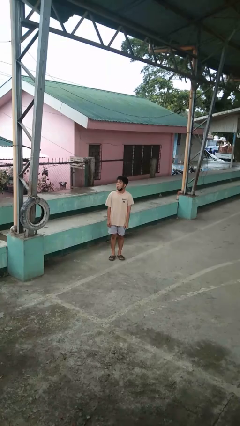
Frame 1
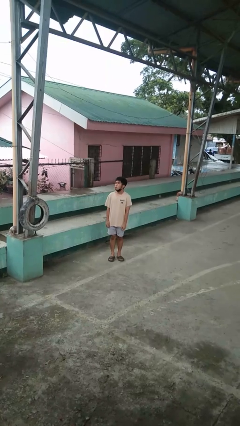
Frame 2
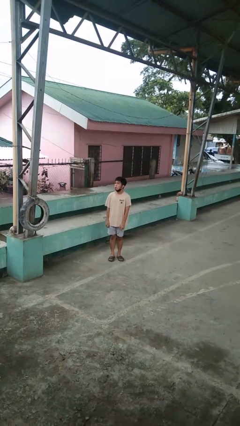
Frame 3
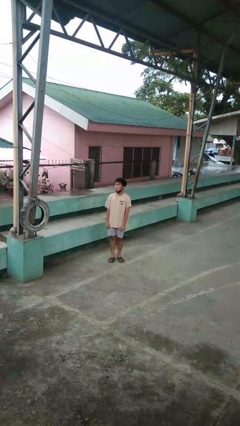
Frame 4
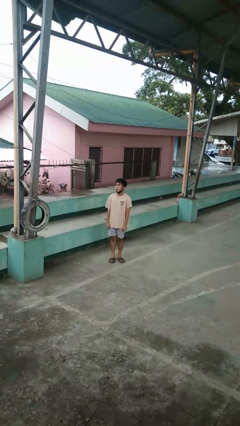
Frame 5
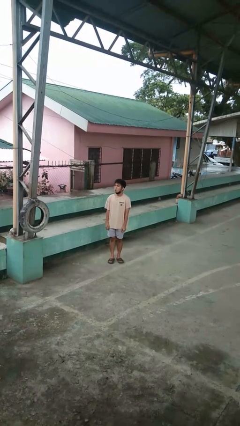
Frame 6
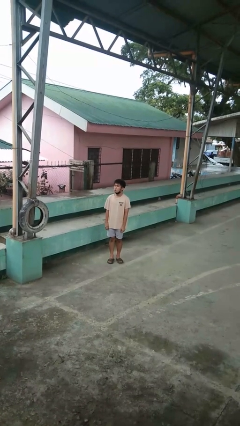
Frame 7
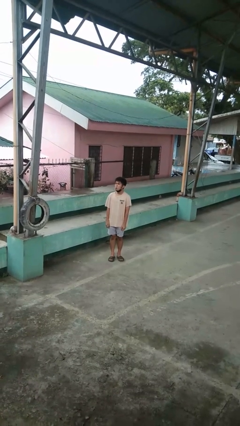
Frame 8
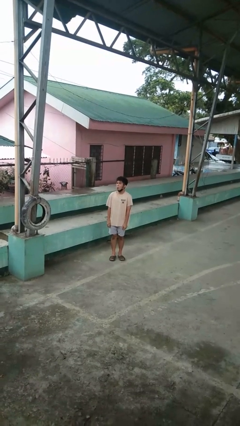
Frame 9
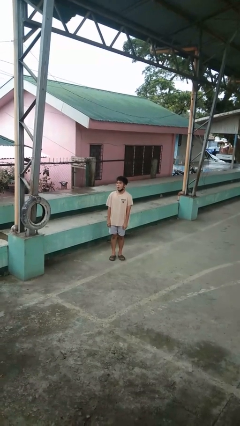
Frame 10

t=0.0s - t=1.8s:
person sticks out tongue

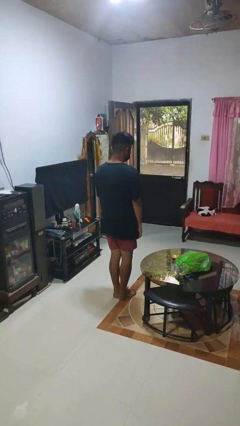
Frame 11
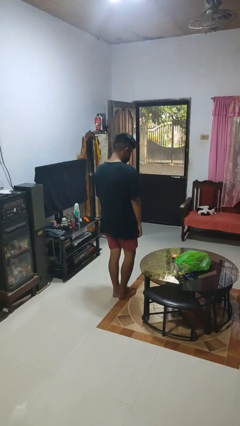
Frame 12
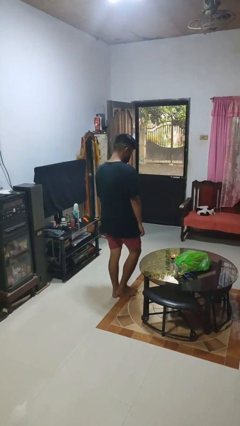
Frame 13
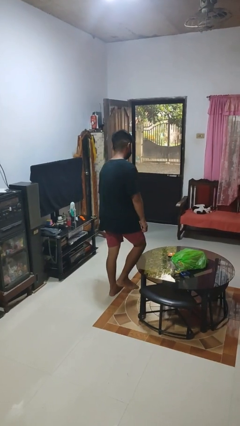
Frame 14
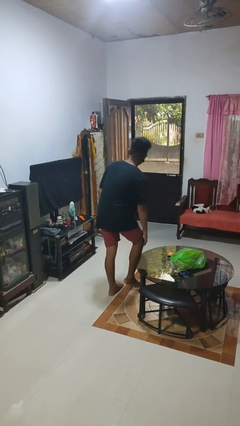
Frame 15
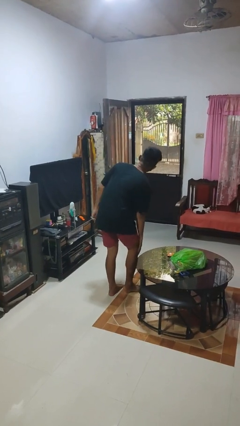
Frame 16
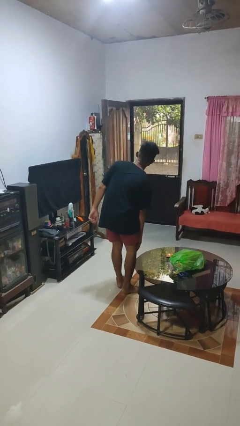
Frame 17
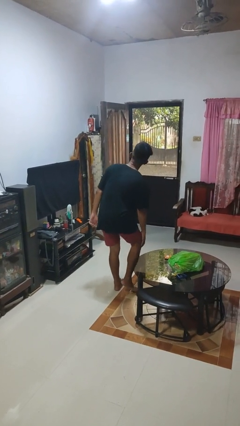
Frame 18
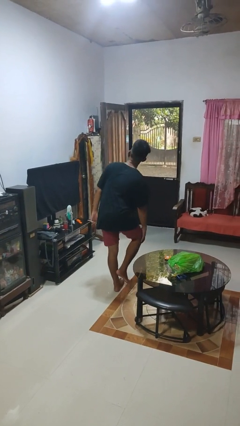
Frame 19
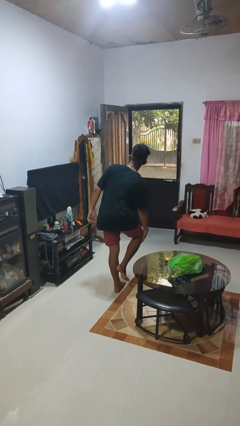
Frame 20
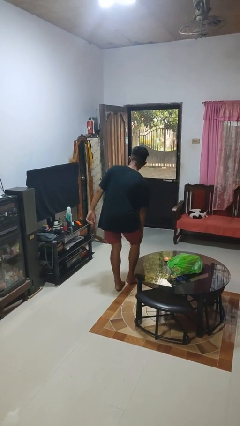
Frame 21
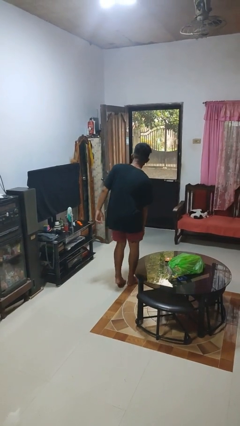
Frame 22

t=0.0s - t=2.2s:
person bumps into table

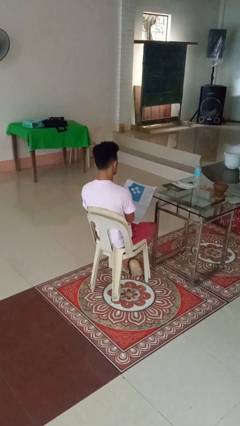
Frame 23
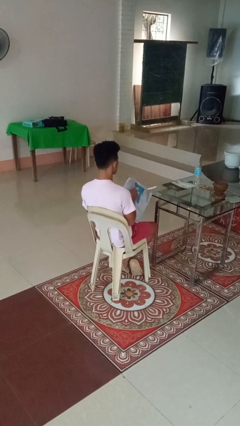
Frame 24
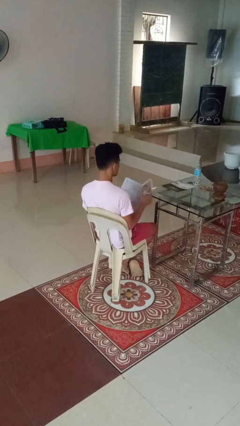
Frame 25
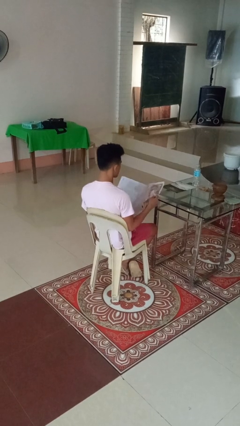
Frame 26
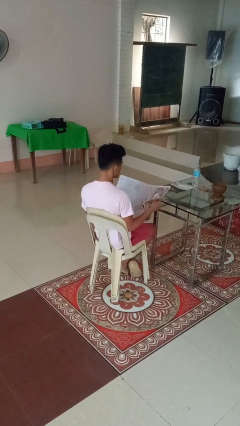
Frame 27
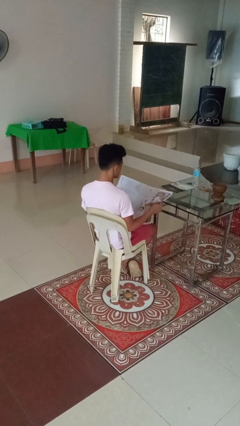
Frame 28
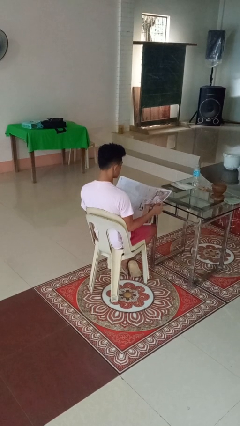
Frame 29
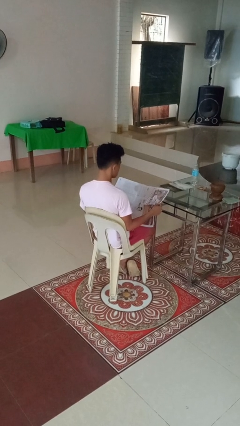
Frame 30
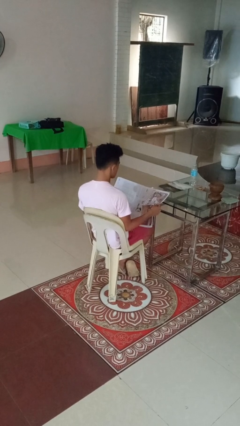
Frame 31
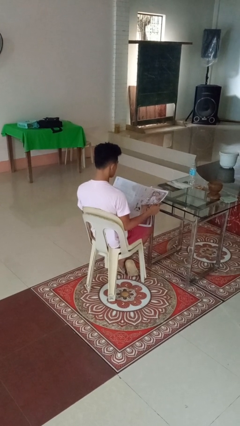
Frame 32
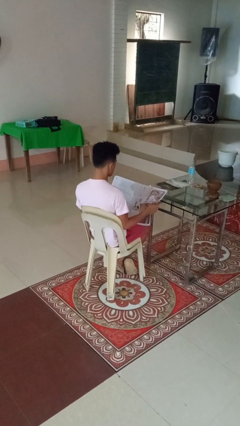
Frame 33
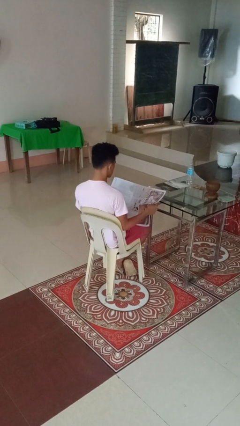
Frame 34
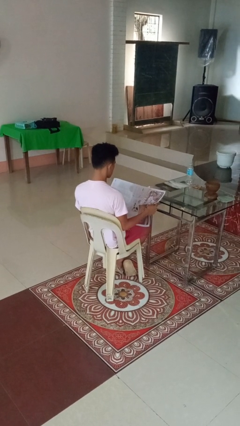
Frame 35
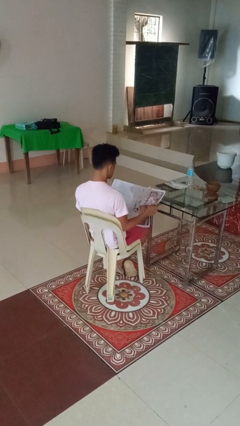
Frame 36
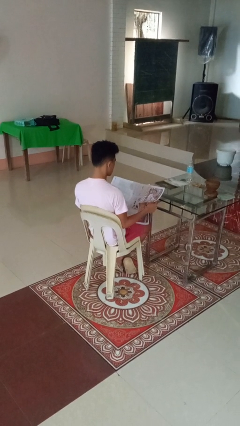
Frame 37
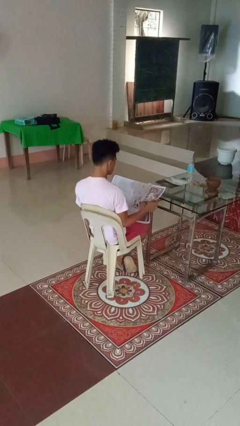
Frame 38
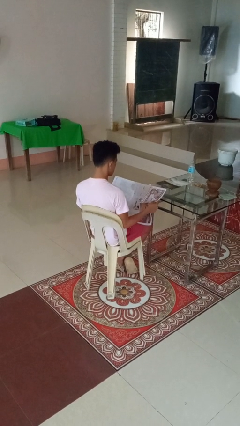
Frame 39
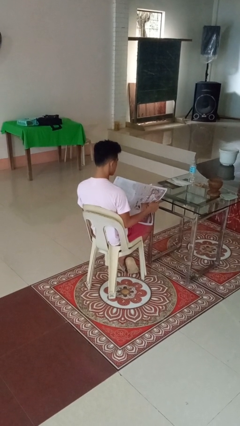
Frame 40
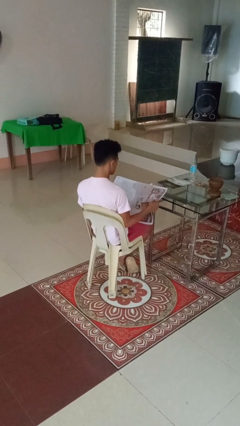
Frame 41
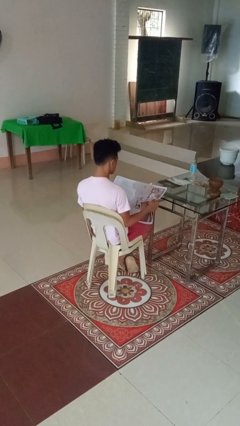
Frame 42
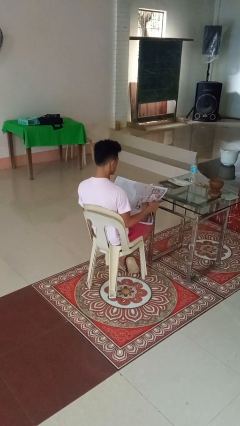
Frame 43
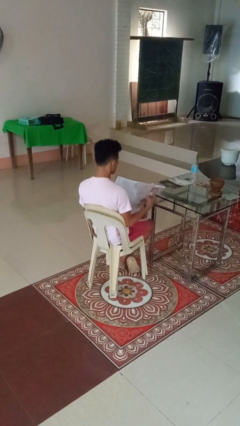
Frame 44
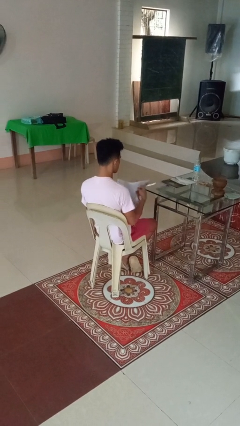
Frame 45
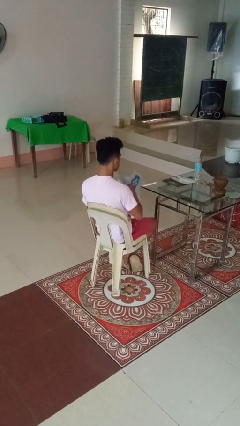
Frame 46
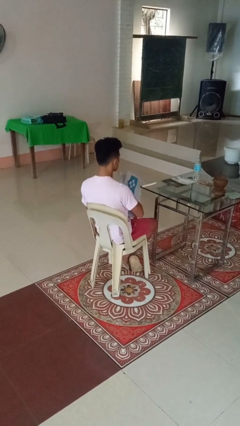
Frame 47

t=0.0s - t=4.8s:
person reads newspaper

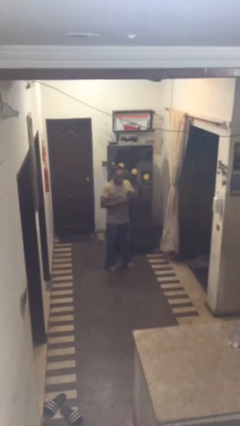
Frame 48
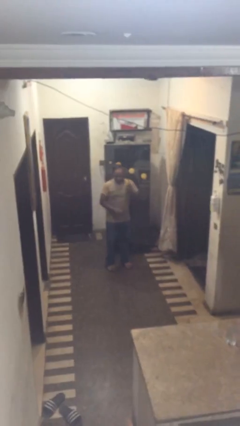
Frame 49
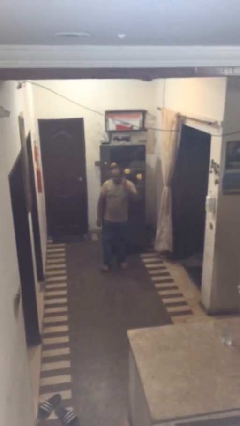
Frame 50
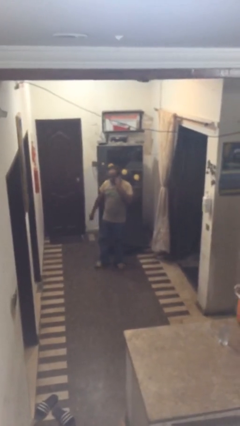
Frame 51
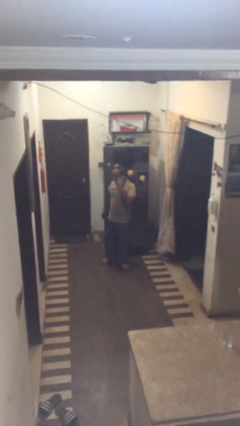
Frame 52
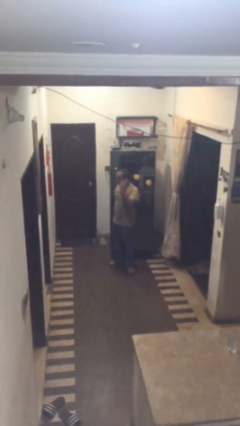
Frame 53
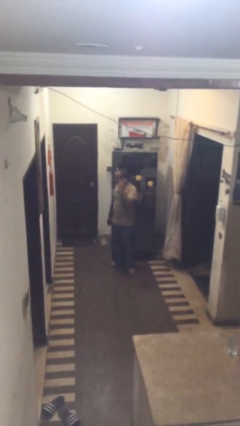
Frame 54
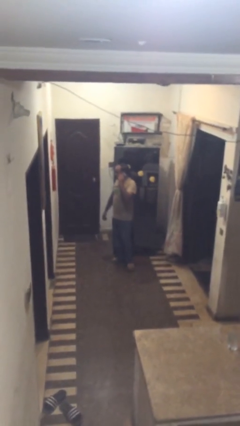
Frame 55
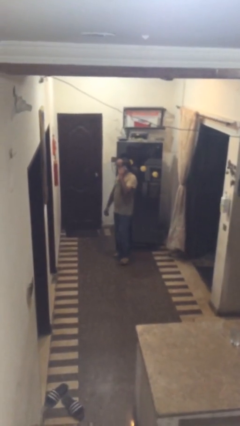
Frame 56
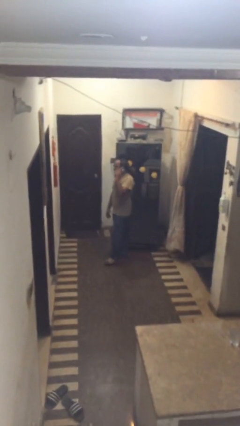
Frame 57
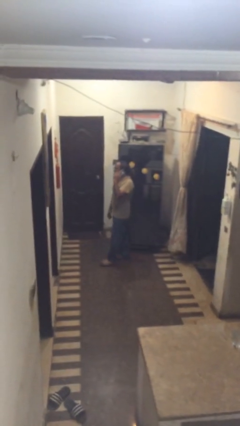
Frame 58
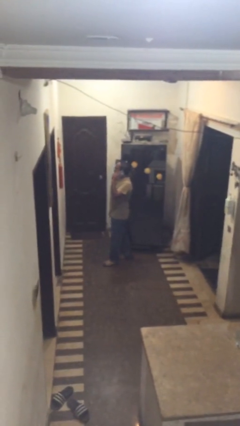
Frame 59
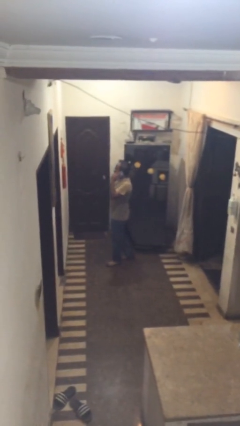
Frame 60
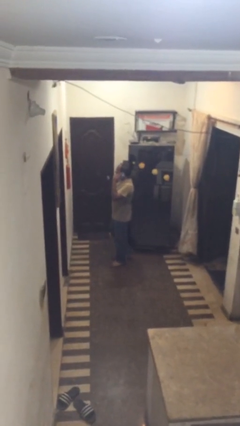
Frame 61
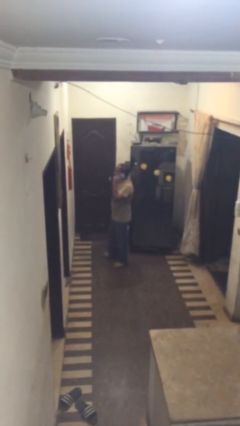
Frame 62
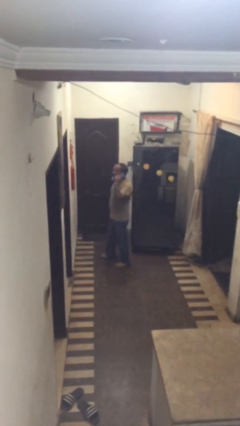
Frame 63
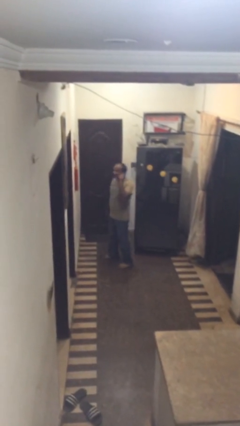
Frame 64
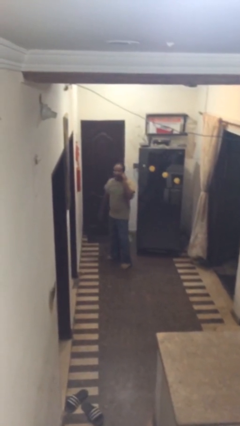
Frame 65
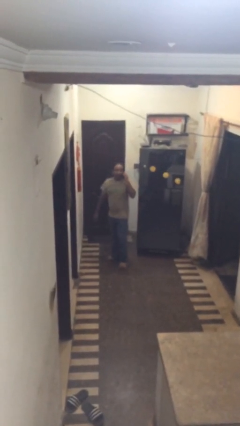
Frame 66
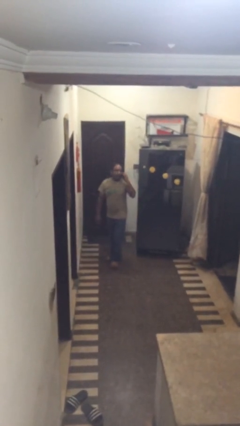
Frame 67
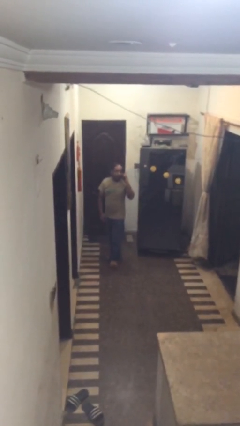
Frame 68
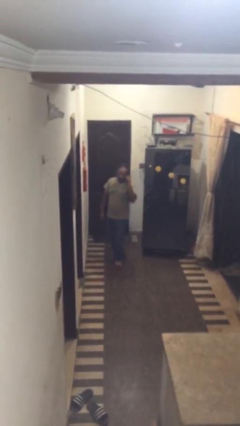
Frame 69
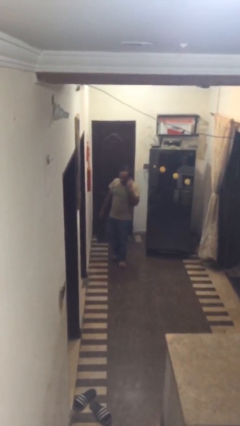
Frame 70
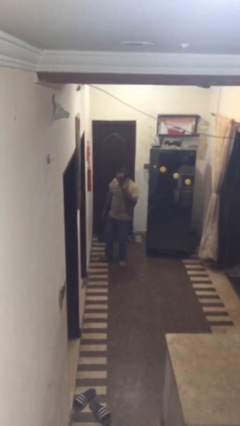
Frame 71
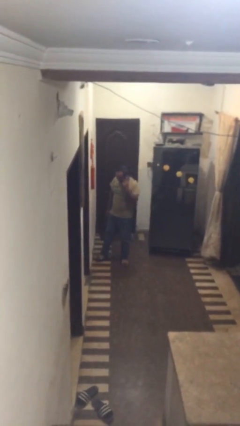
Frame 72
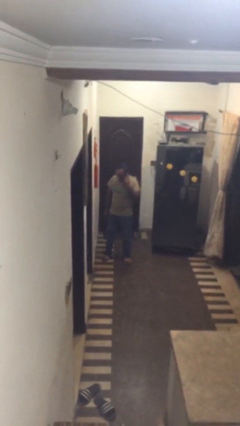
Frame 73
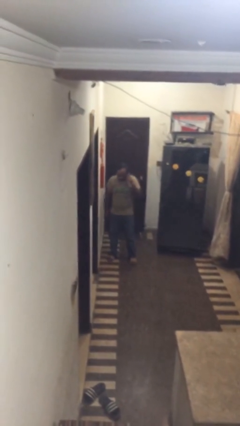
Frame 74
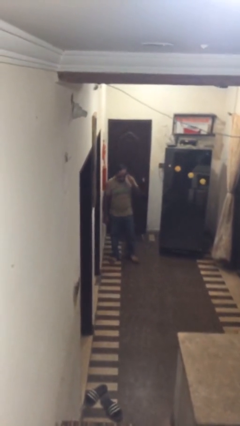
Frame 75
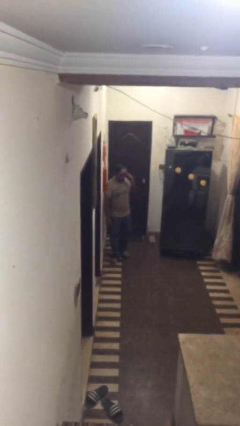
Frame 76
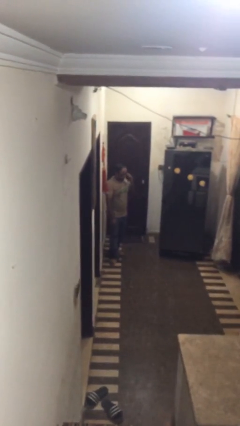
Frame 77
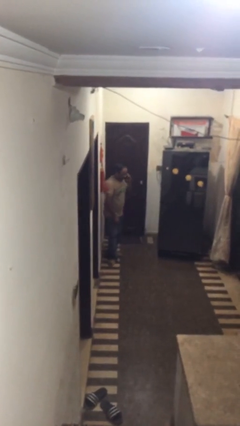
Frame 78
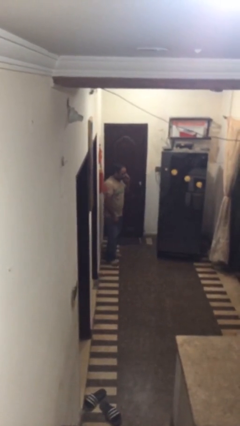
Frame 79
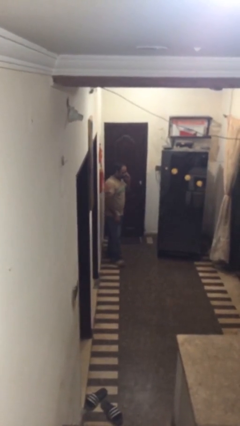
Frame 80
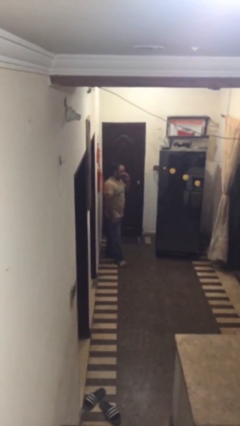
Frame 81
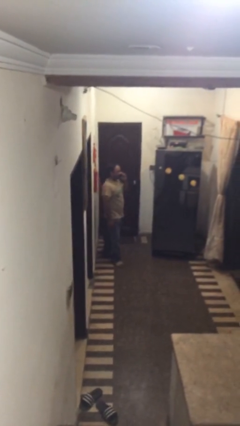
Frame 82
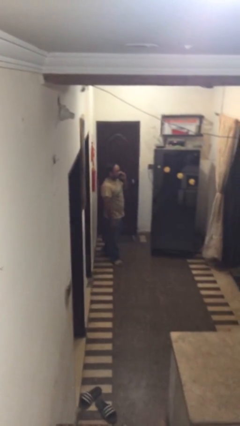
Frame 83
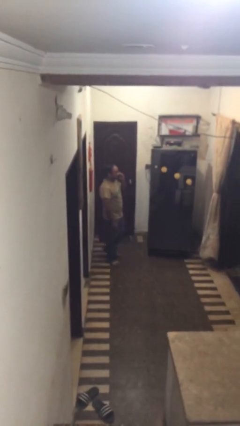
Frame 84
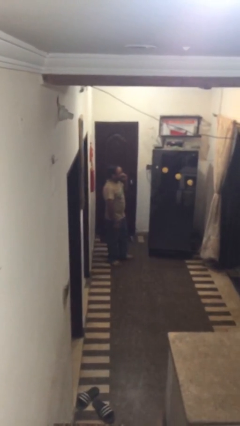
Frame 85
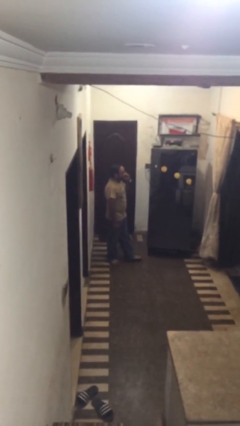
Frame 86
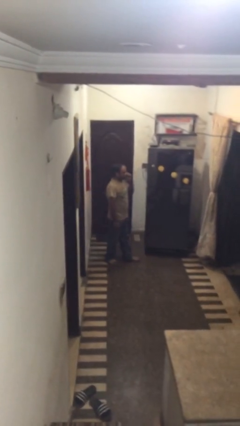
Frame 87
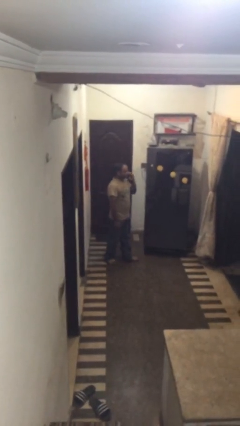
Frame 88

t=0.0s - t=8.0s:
person talks on phone

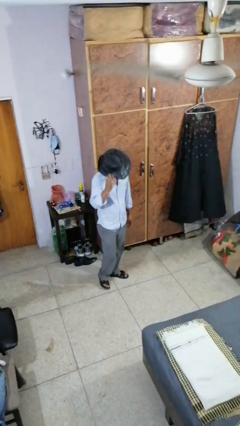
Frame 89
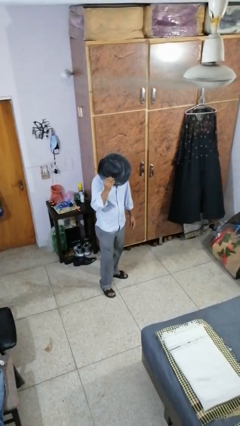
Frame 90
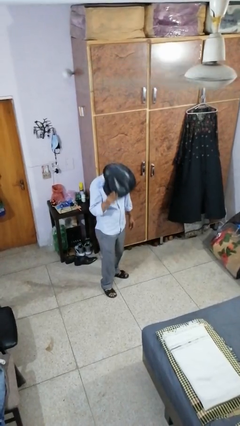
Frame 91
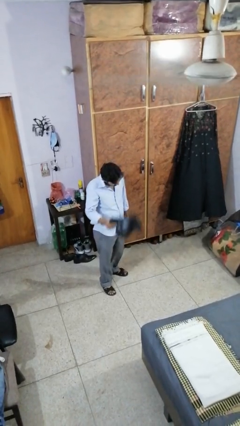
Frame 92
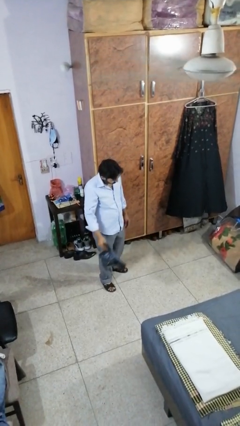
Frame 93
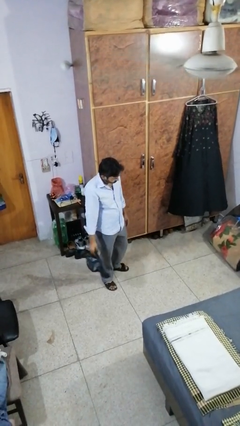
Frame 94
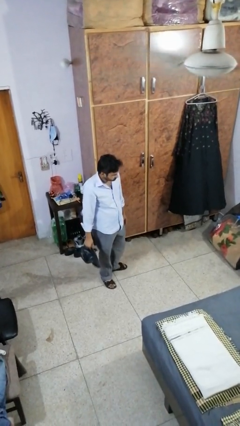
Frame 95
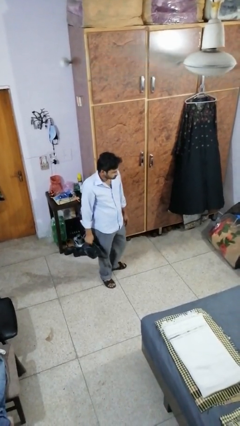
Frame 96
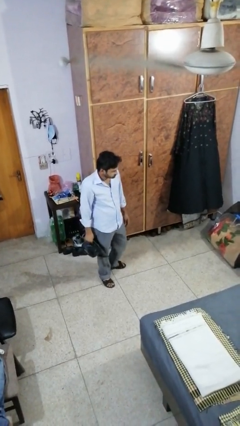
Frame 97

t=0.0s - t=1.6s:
person takes off hat
